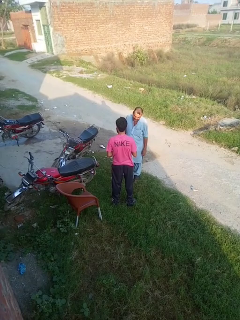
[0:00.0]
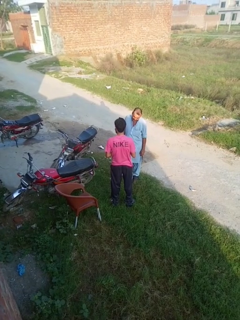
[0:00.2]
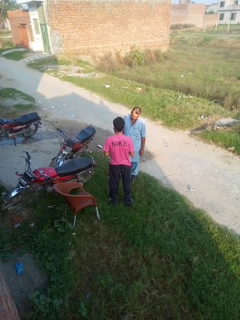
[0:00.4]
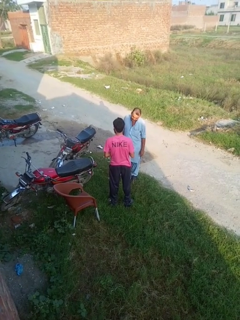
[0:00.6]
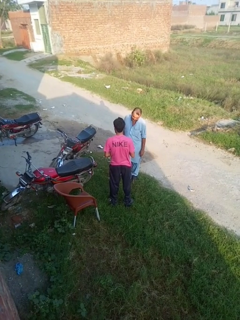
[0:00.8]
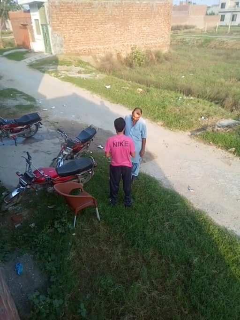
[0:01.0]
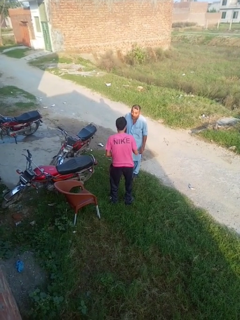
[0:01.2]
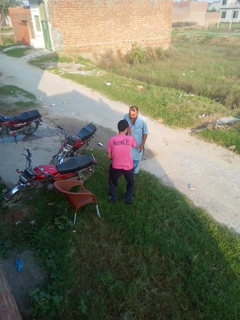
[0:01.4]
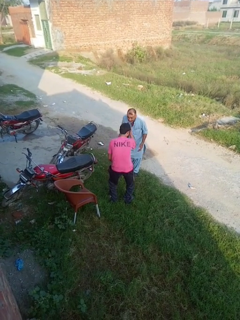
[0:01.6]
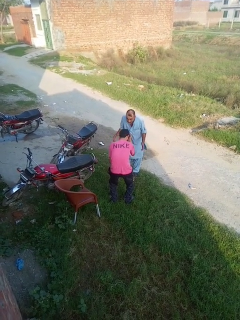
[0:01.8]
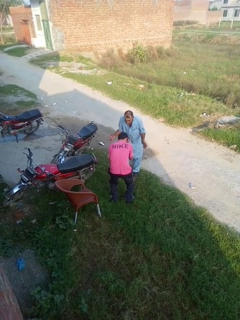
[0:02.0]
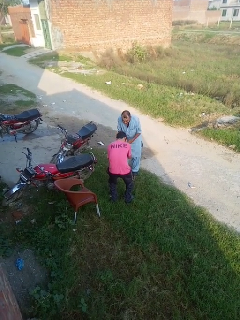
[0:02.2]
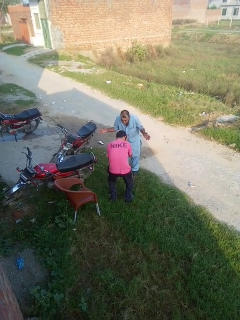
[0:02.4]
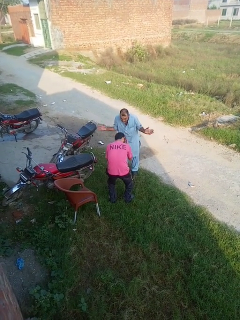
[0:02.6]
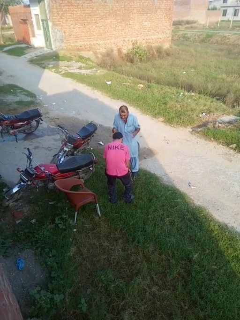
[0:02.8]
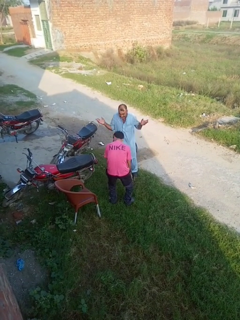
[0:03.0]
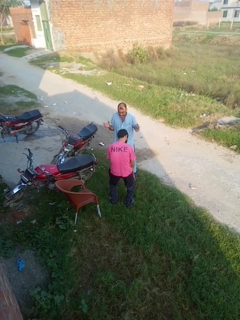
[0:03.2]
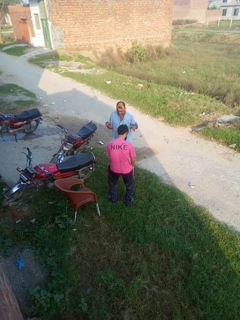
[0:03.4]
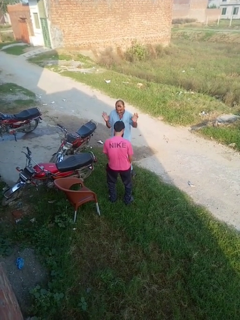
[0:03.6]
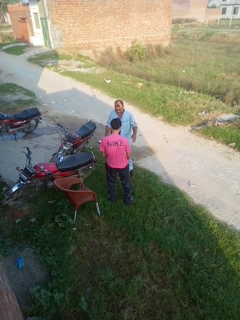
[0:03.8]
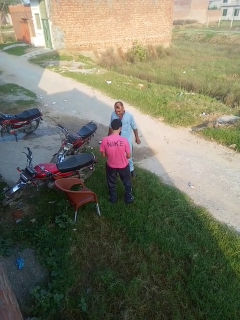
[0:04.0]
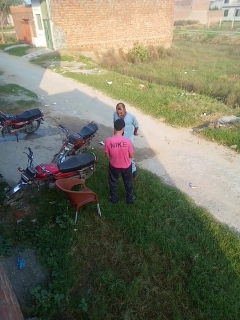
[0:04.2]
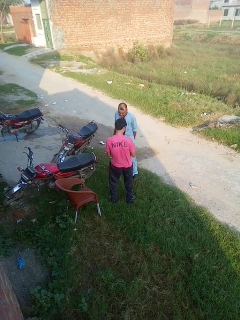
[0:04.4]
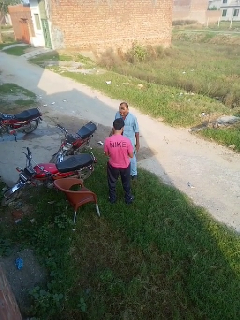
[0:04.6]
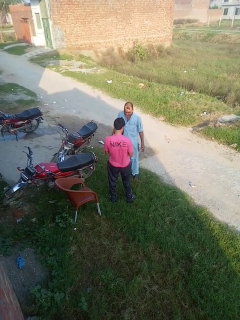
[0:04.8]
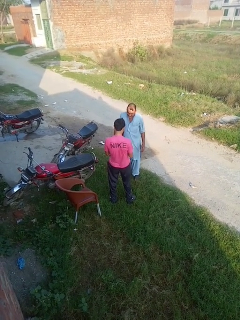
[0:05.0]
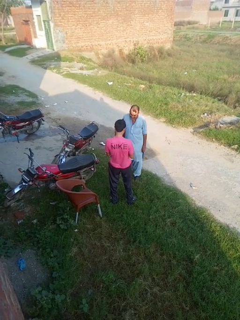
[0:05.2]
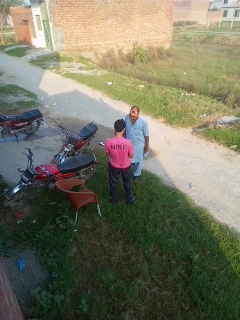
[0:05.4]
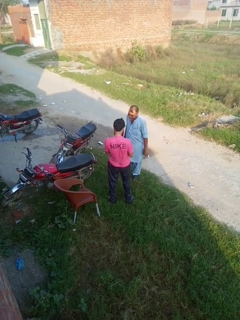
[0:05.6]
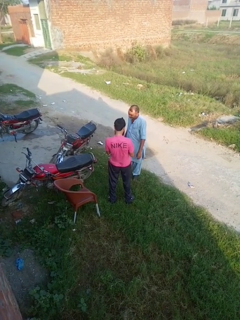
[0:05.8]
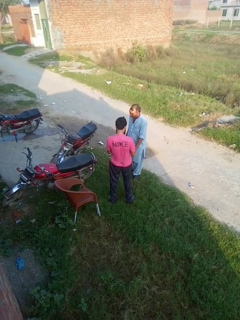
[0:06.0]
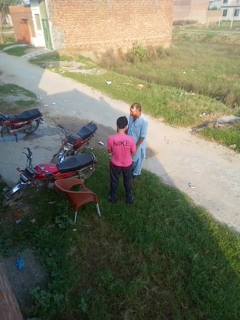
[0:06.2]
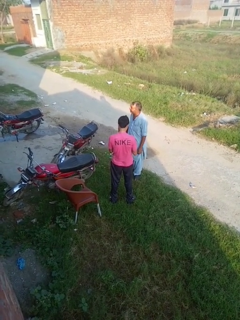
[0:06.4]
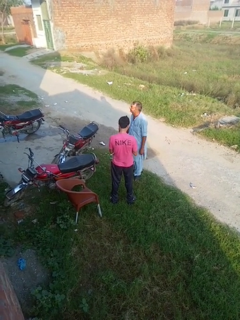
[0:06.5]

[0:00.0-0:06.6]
person laughs with person

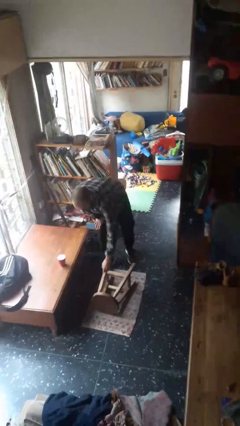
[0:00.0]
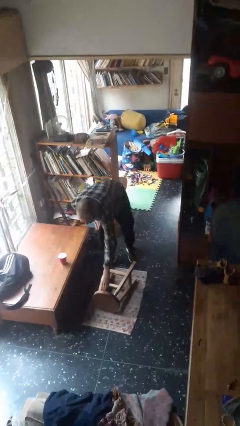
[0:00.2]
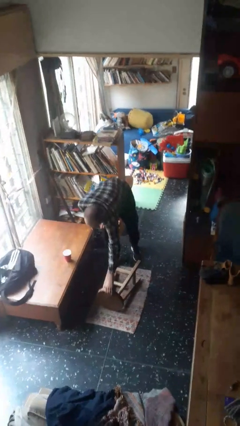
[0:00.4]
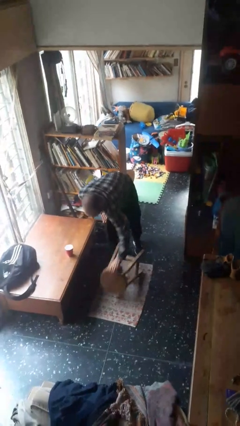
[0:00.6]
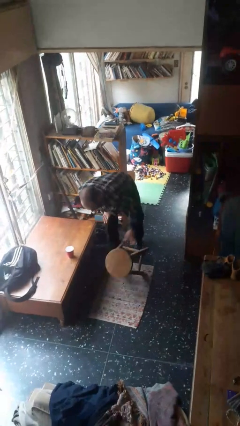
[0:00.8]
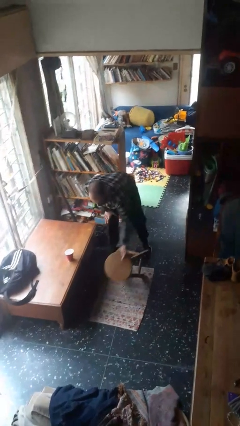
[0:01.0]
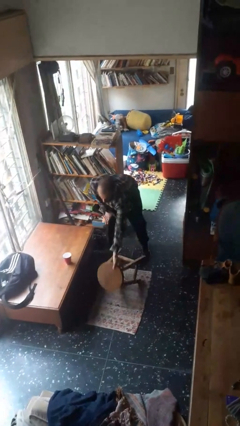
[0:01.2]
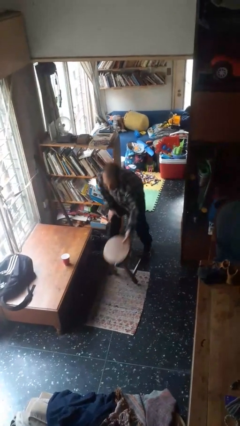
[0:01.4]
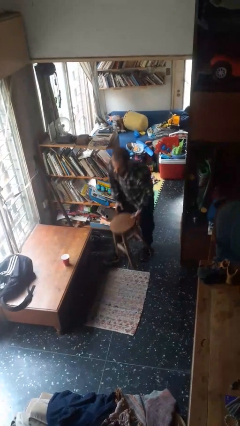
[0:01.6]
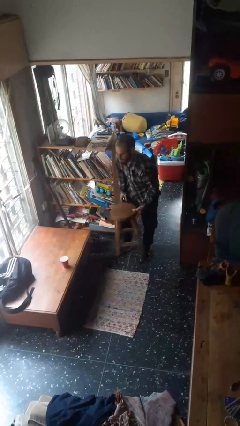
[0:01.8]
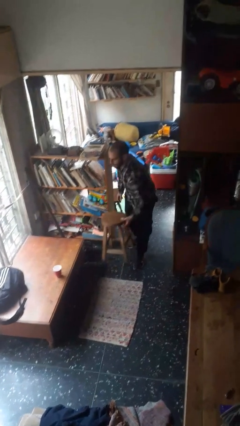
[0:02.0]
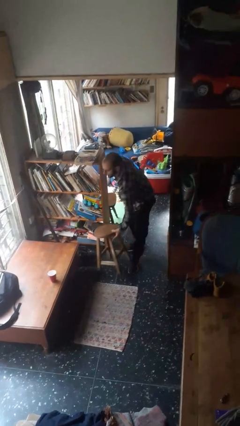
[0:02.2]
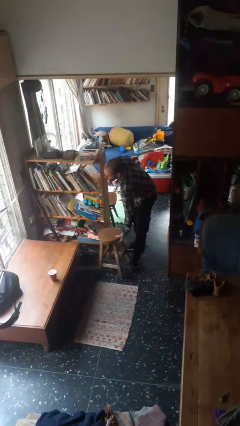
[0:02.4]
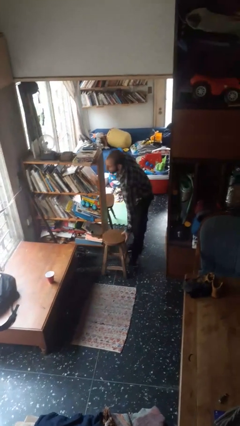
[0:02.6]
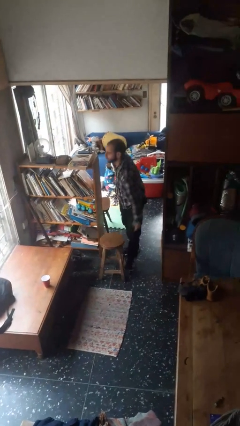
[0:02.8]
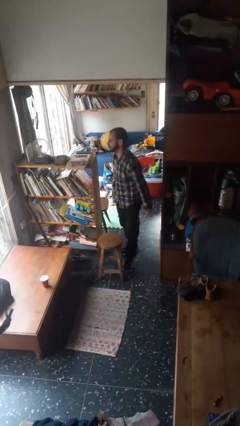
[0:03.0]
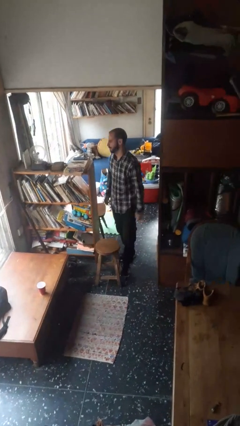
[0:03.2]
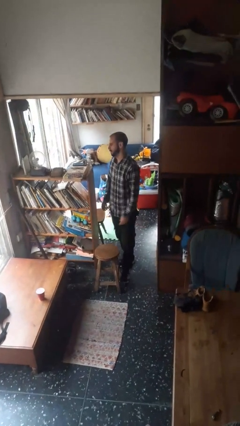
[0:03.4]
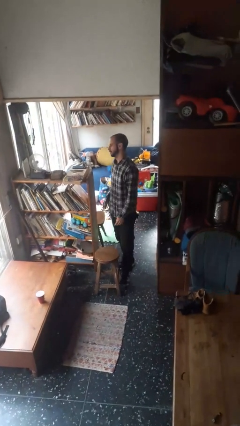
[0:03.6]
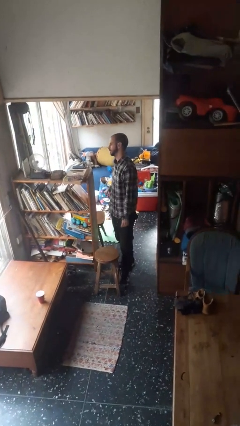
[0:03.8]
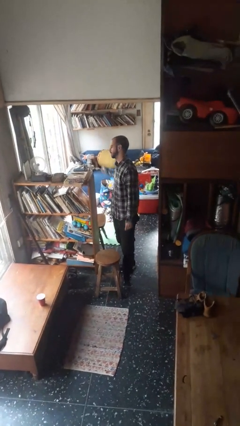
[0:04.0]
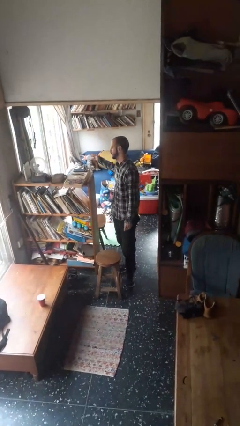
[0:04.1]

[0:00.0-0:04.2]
person sets upright furniture

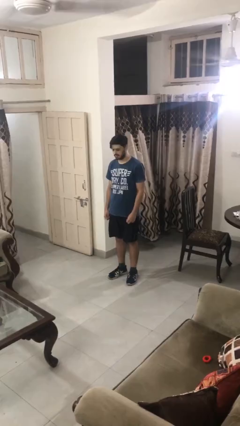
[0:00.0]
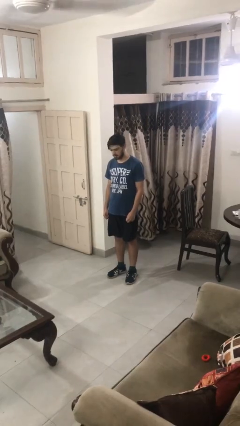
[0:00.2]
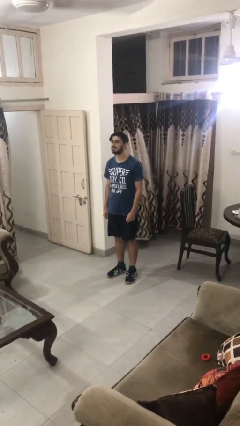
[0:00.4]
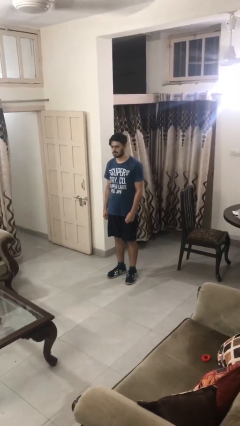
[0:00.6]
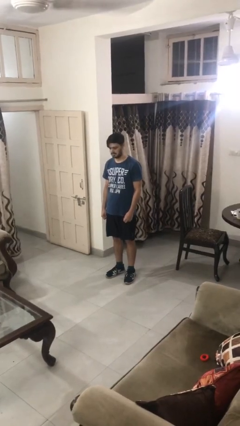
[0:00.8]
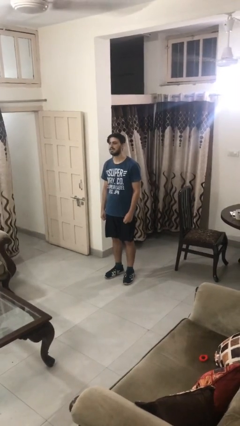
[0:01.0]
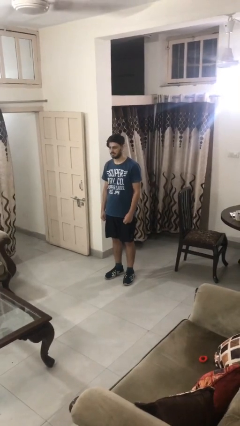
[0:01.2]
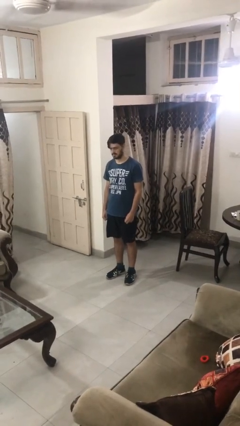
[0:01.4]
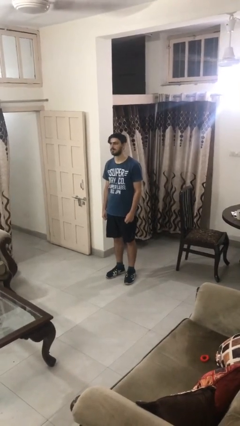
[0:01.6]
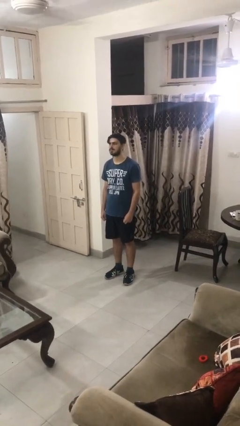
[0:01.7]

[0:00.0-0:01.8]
person nods head

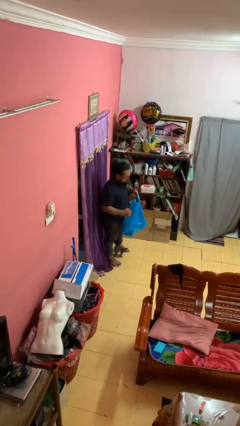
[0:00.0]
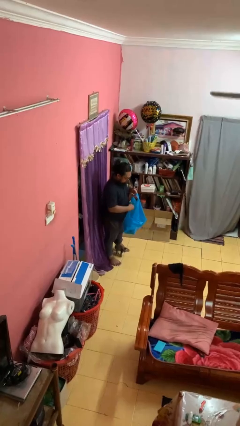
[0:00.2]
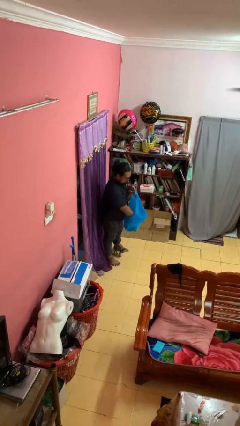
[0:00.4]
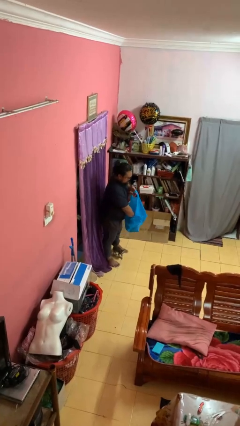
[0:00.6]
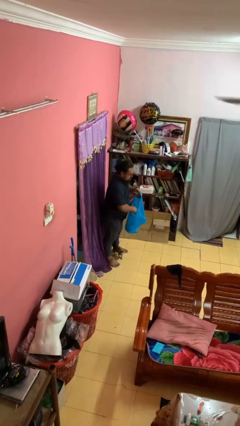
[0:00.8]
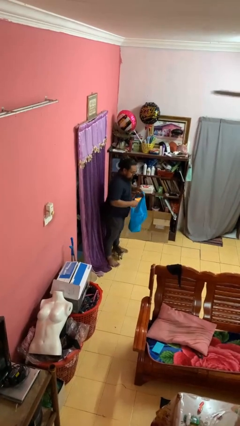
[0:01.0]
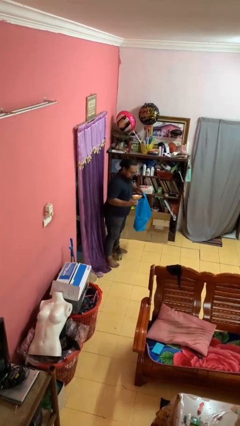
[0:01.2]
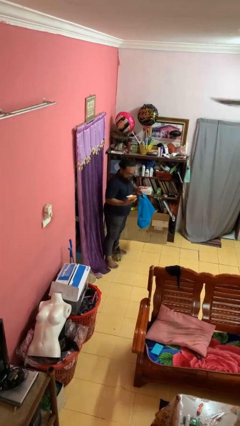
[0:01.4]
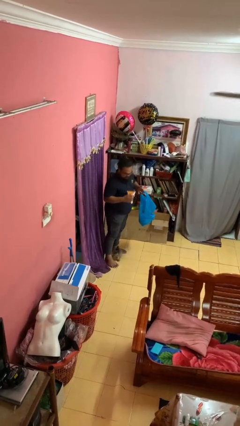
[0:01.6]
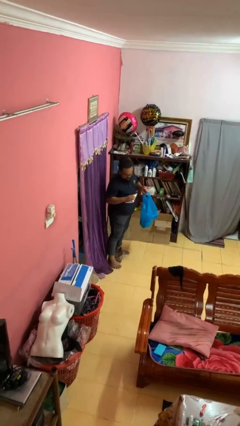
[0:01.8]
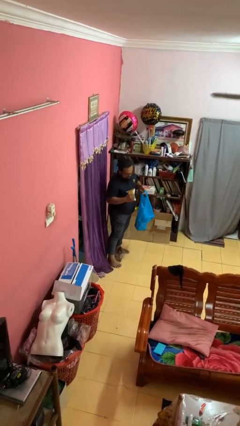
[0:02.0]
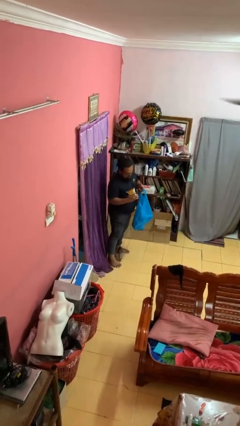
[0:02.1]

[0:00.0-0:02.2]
person takes object from bag

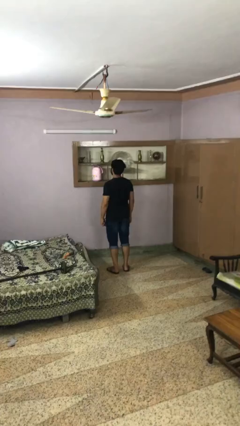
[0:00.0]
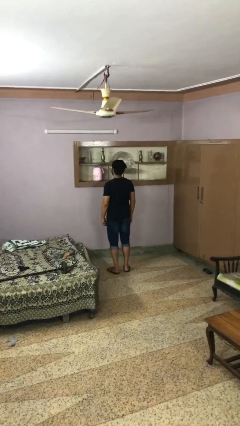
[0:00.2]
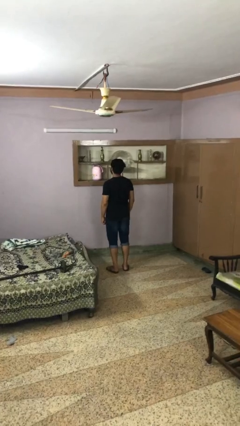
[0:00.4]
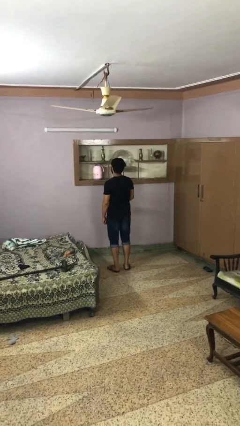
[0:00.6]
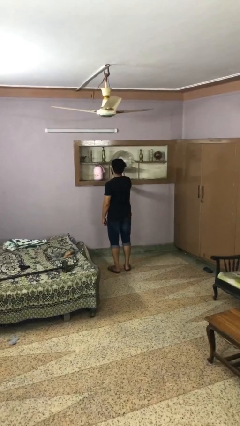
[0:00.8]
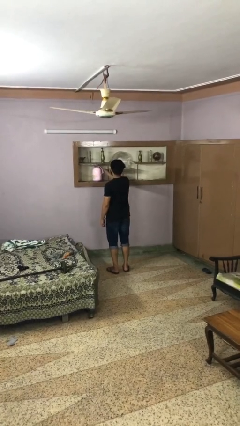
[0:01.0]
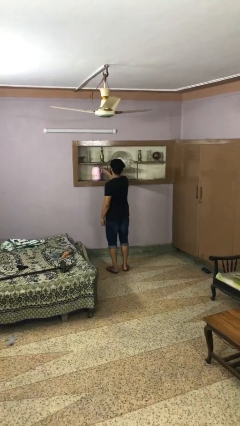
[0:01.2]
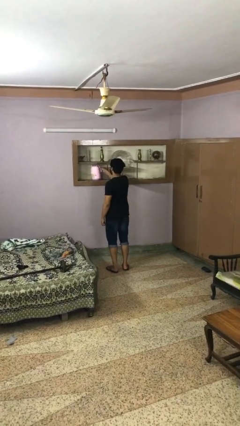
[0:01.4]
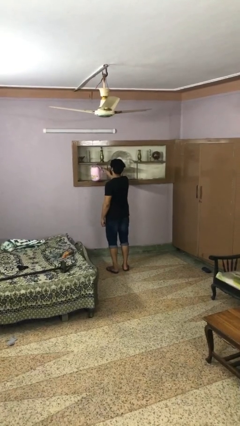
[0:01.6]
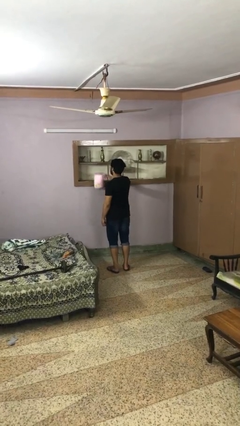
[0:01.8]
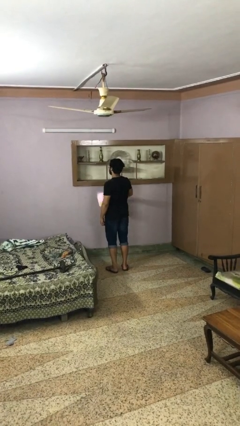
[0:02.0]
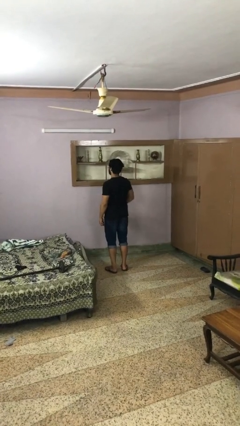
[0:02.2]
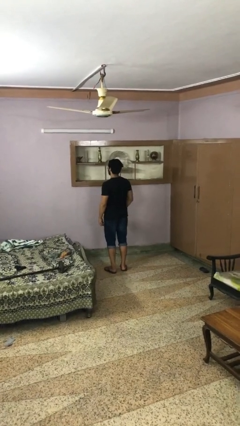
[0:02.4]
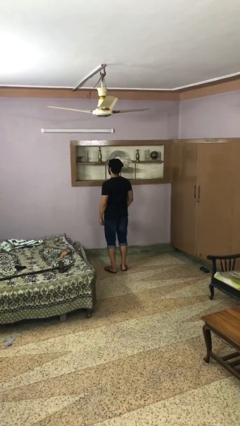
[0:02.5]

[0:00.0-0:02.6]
person picks up object from countertop

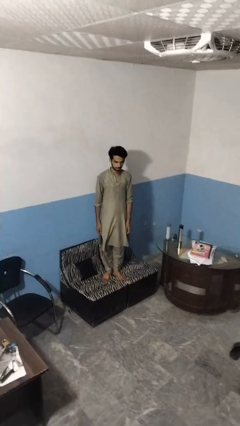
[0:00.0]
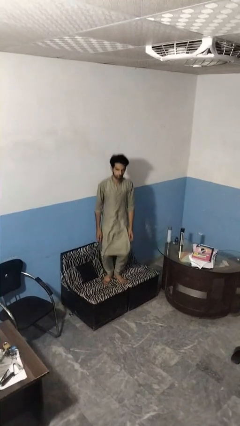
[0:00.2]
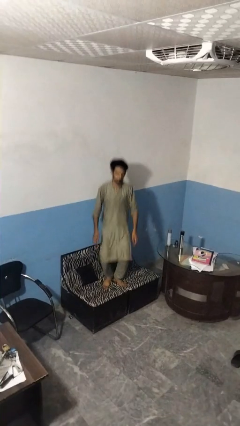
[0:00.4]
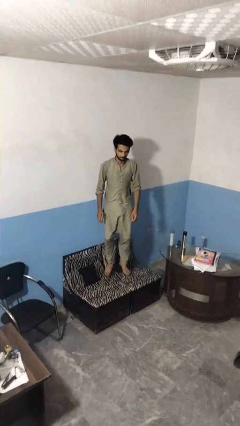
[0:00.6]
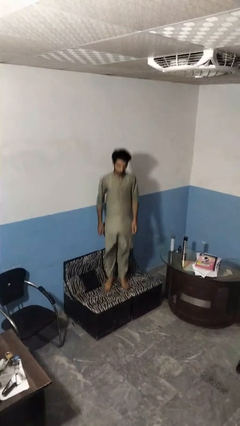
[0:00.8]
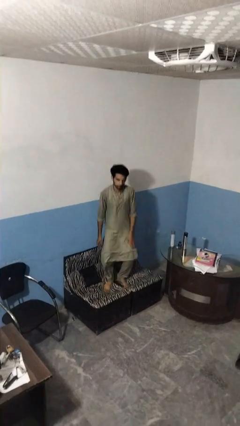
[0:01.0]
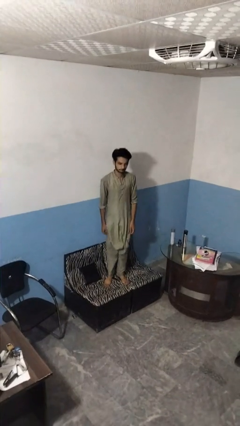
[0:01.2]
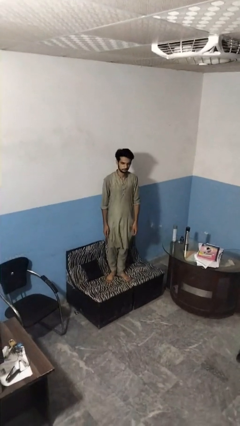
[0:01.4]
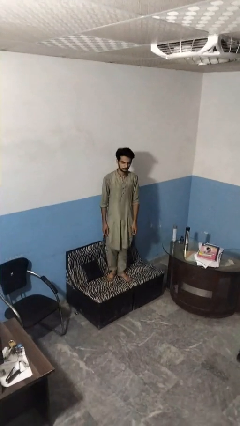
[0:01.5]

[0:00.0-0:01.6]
person jumps on couch
